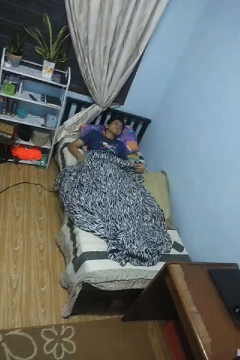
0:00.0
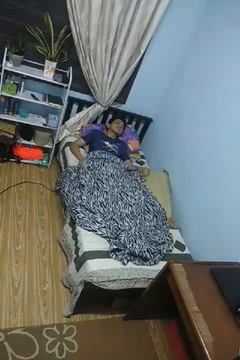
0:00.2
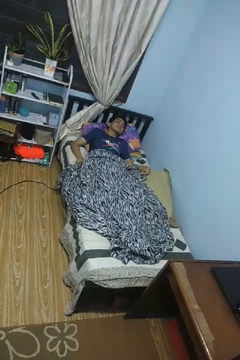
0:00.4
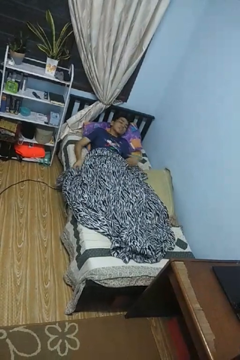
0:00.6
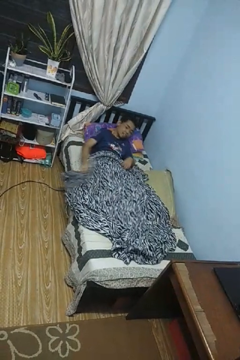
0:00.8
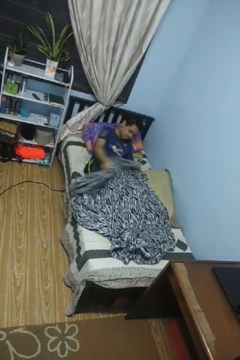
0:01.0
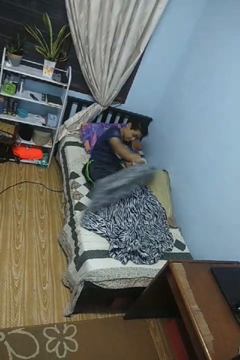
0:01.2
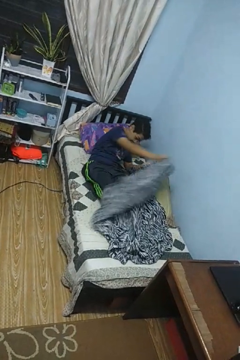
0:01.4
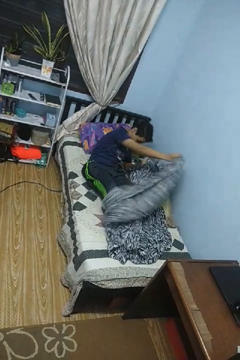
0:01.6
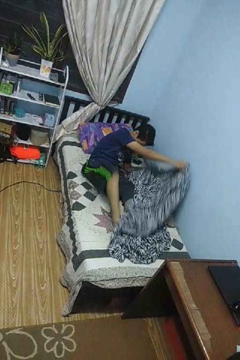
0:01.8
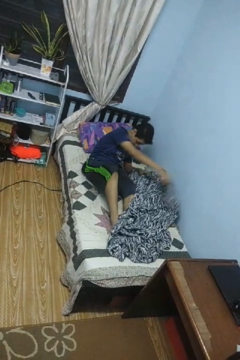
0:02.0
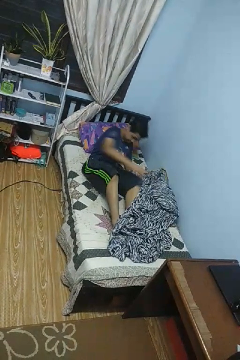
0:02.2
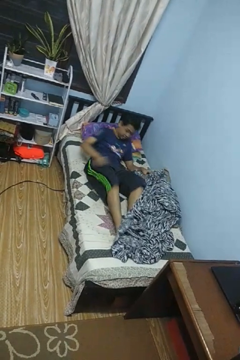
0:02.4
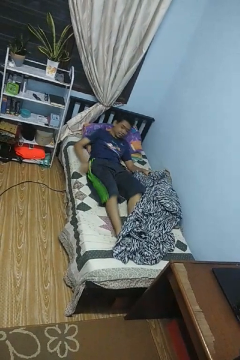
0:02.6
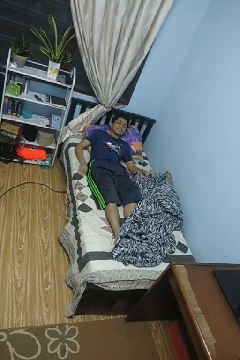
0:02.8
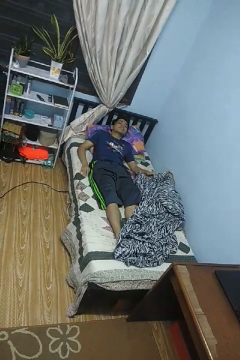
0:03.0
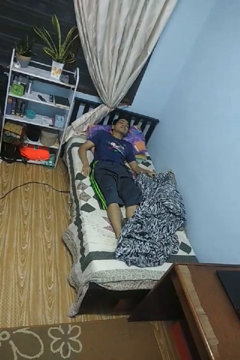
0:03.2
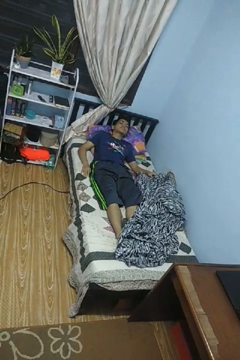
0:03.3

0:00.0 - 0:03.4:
person uncovers with blanket

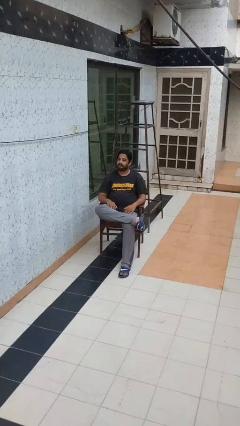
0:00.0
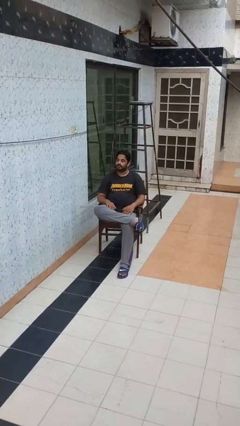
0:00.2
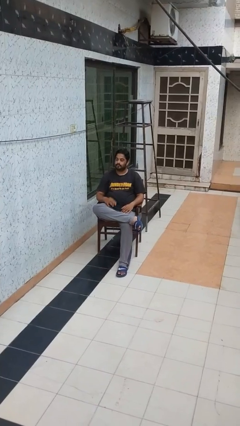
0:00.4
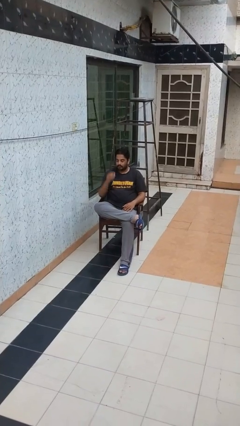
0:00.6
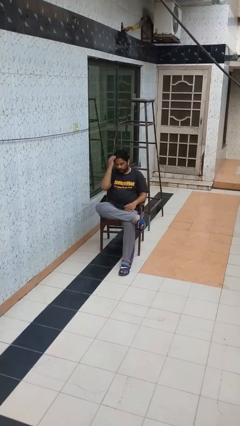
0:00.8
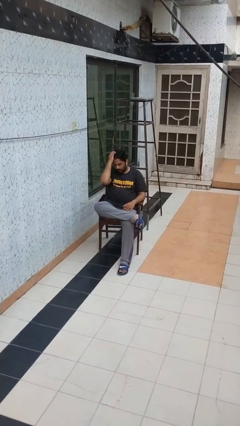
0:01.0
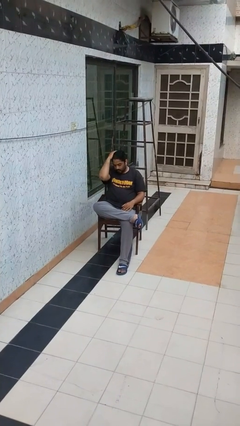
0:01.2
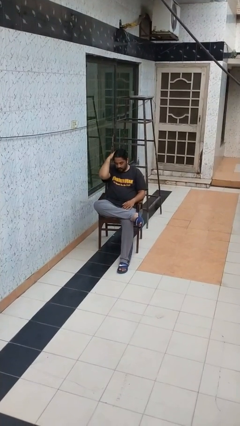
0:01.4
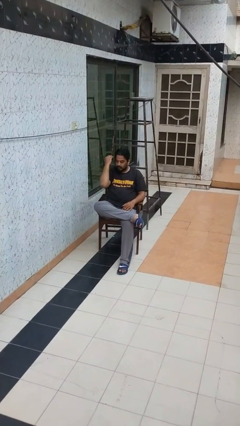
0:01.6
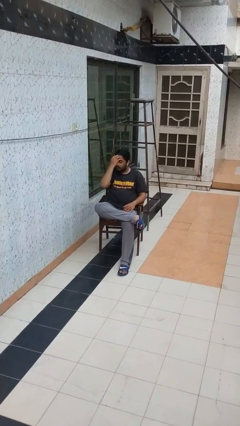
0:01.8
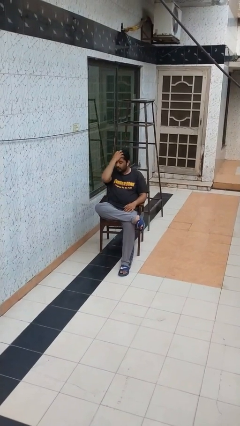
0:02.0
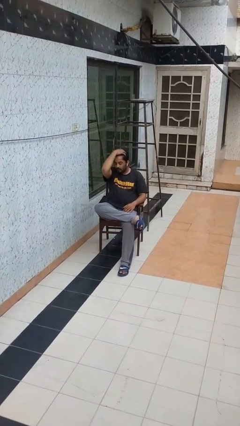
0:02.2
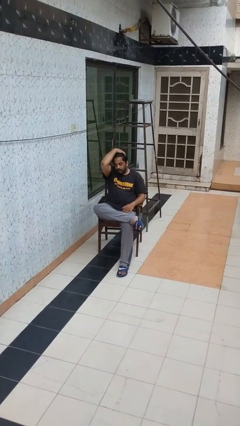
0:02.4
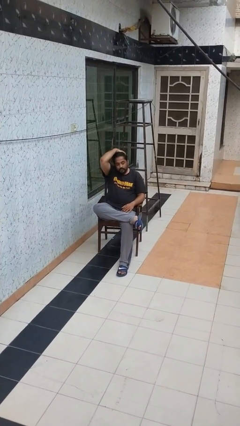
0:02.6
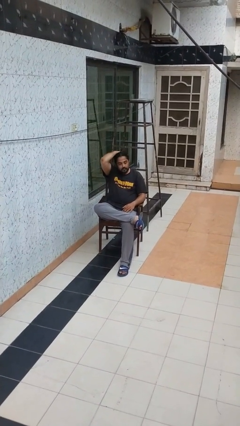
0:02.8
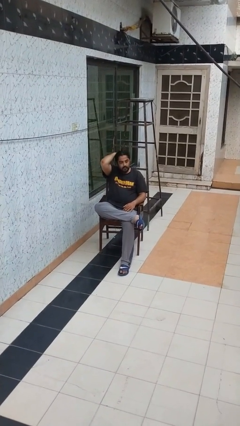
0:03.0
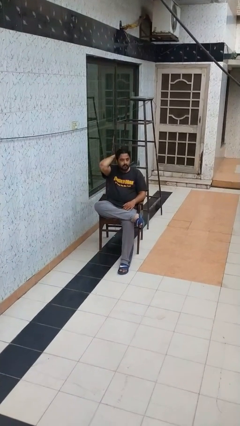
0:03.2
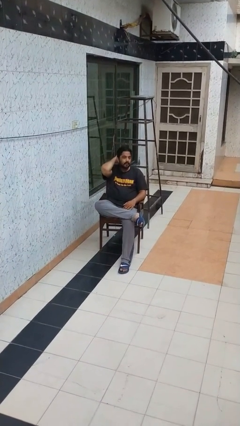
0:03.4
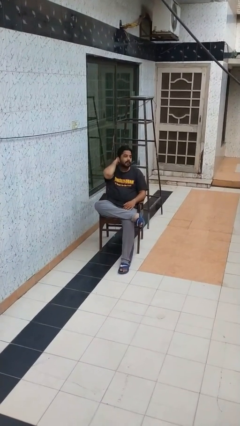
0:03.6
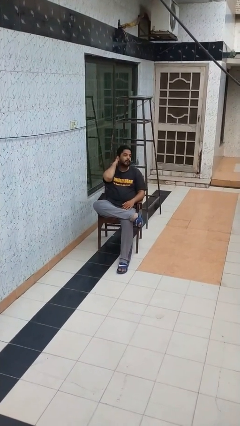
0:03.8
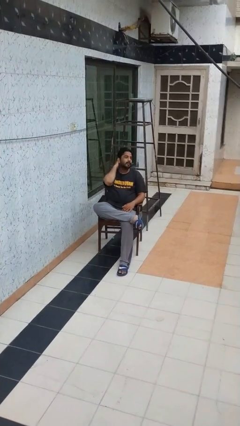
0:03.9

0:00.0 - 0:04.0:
person strokes hair

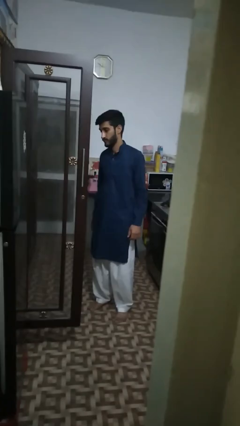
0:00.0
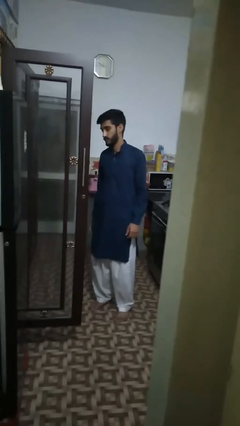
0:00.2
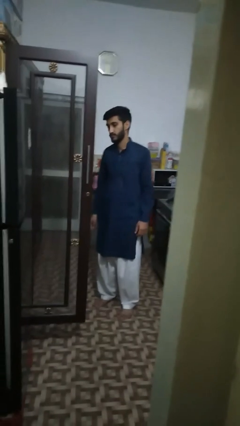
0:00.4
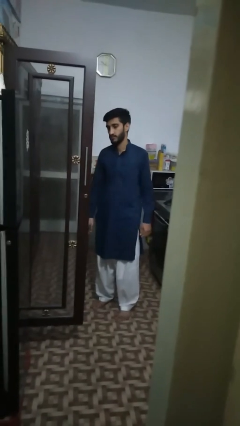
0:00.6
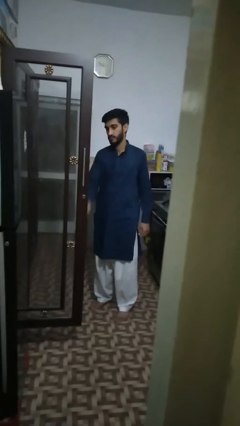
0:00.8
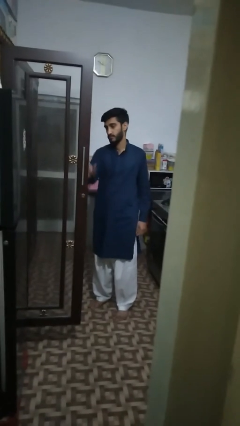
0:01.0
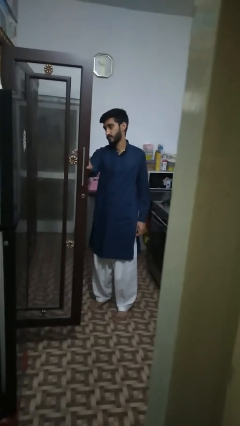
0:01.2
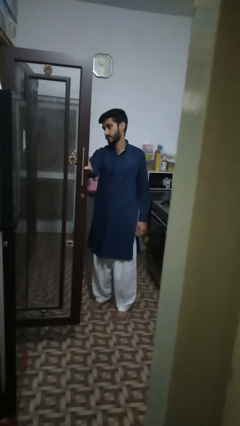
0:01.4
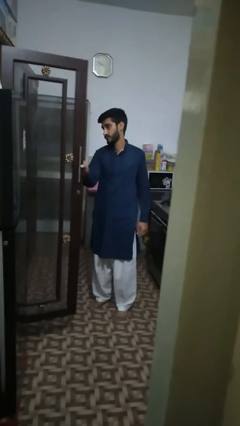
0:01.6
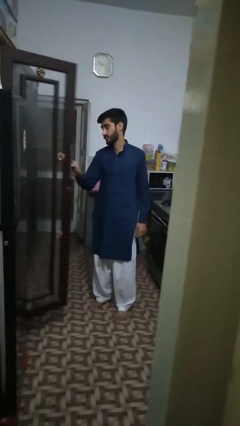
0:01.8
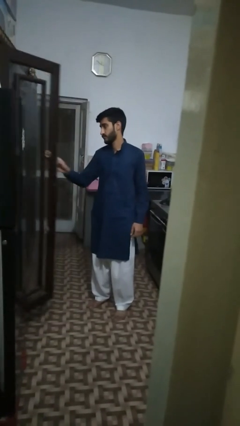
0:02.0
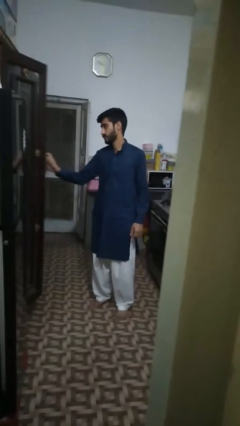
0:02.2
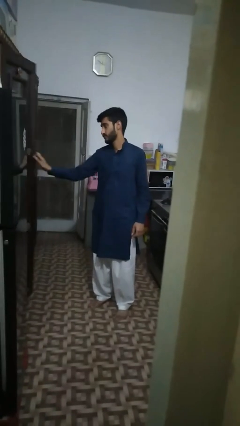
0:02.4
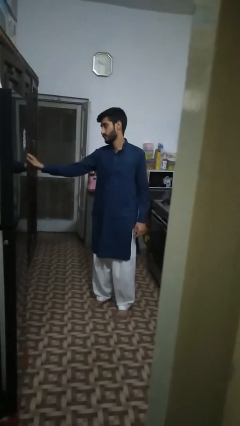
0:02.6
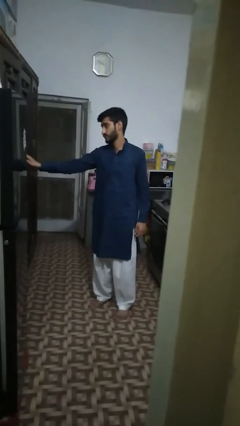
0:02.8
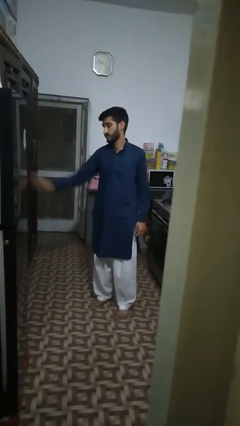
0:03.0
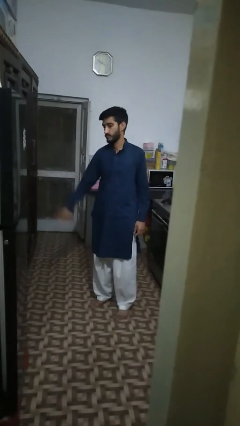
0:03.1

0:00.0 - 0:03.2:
person closes cabinet

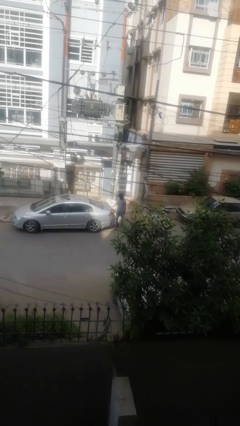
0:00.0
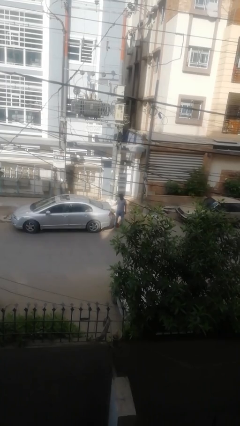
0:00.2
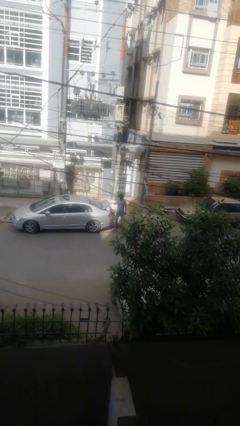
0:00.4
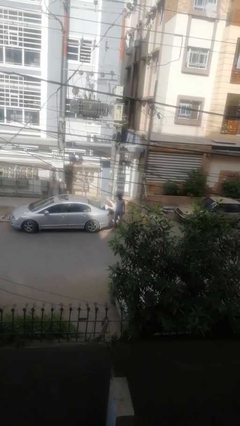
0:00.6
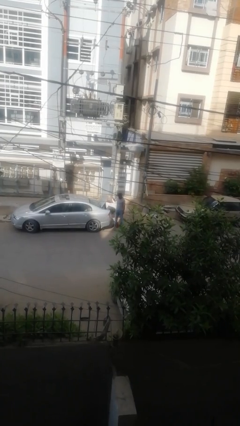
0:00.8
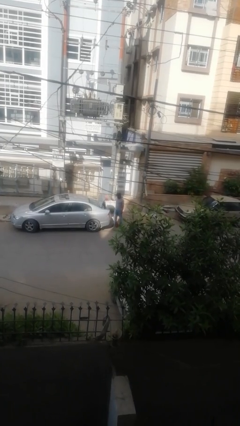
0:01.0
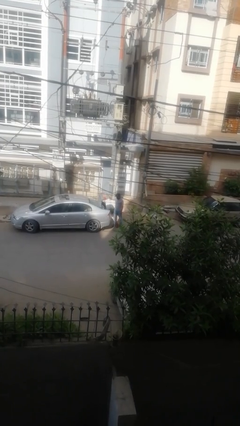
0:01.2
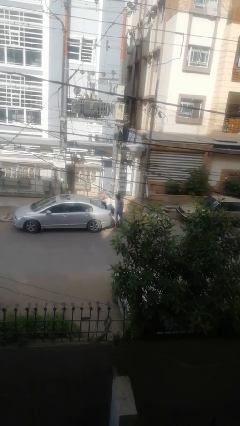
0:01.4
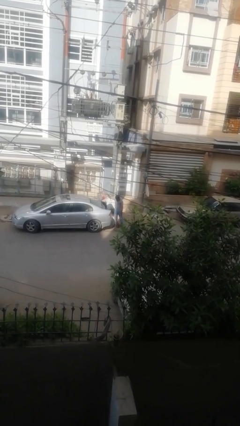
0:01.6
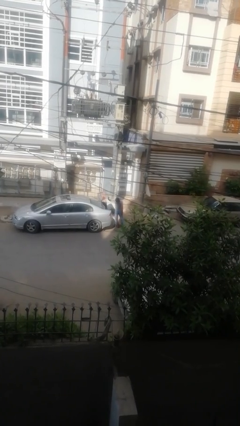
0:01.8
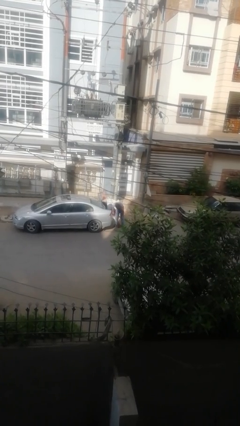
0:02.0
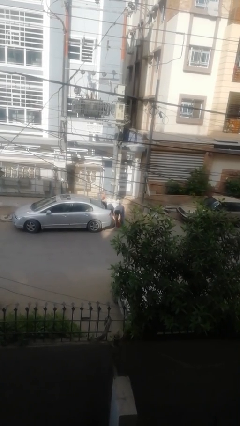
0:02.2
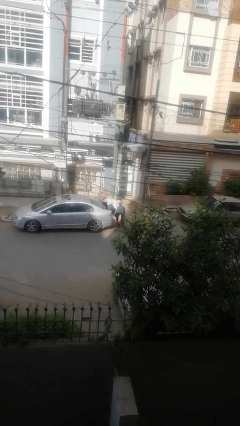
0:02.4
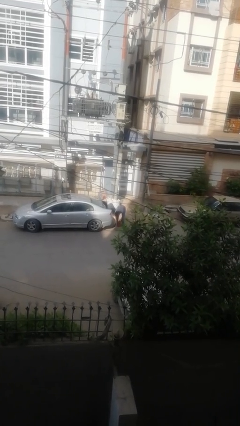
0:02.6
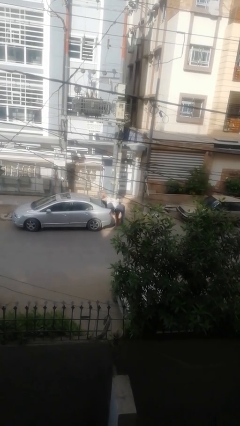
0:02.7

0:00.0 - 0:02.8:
person enters car

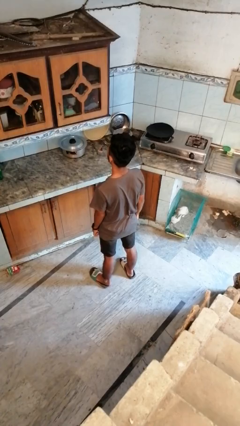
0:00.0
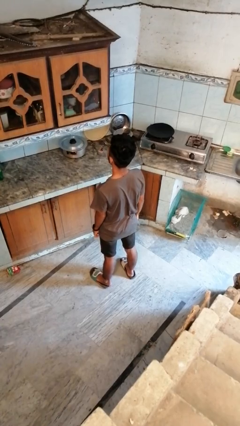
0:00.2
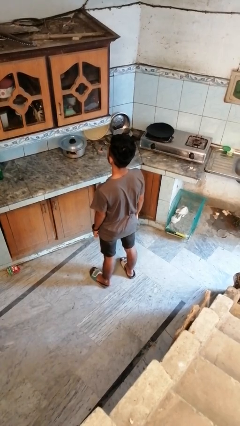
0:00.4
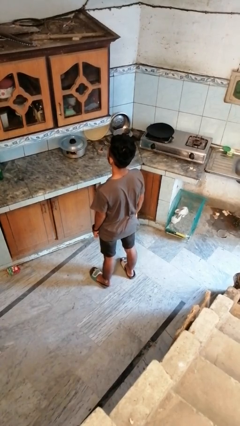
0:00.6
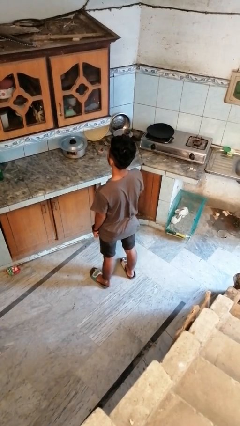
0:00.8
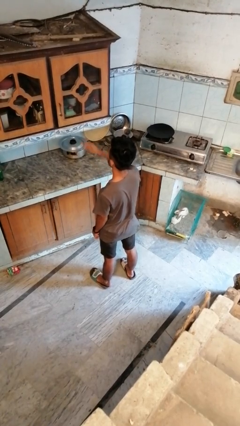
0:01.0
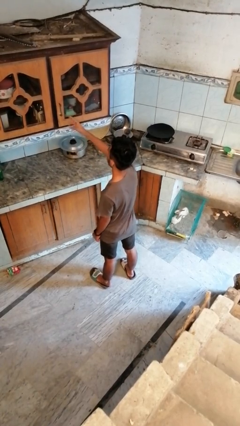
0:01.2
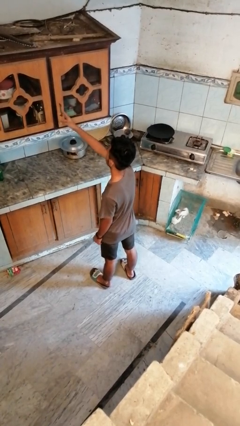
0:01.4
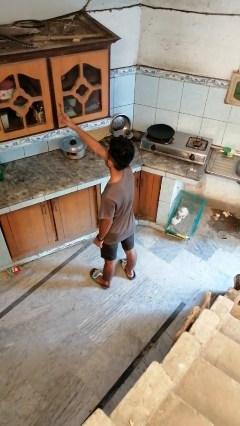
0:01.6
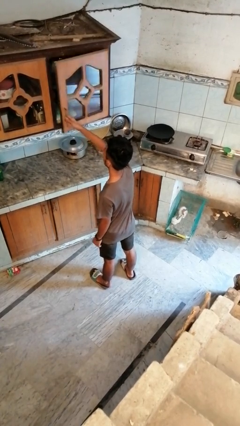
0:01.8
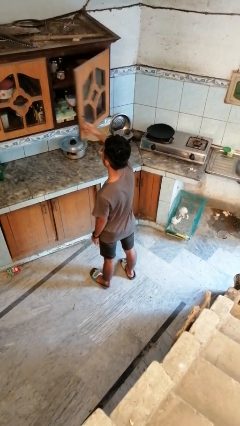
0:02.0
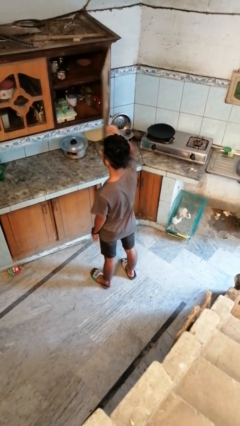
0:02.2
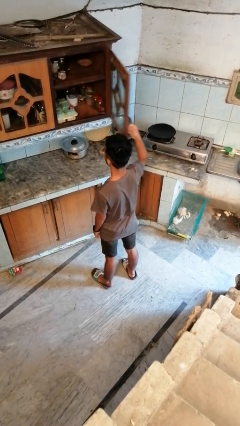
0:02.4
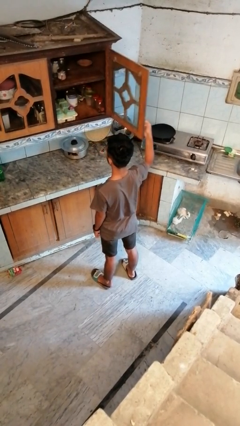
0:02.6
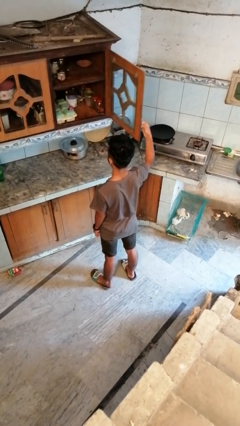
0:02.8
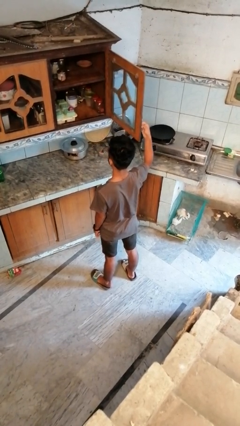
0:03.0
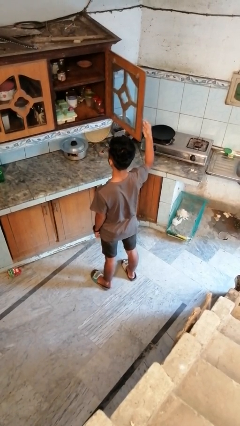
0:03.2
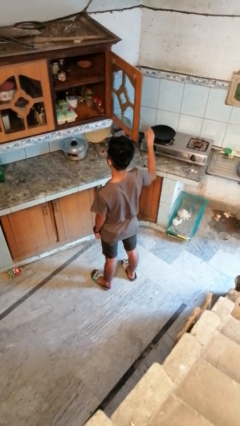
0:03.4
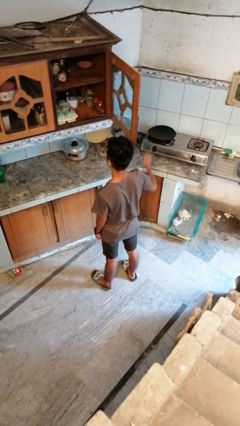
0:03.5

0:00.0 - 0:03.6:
person opens cabinet

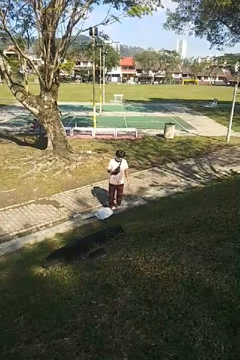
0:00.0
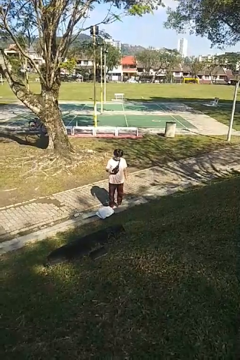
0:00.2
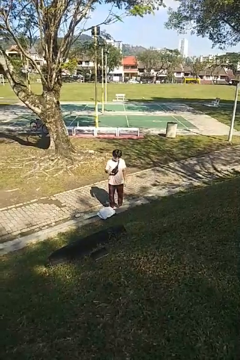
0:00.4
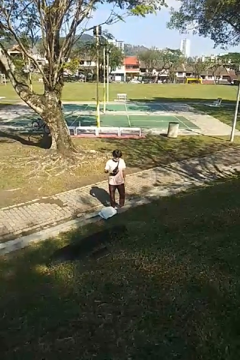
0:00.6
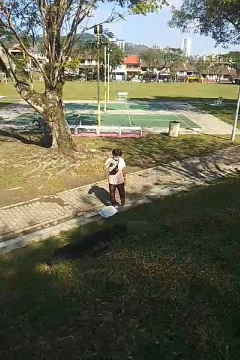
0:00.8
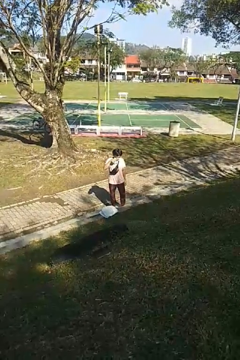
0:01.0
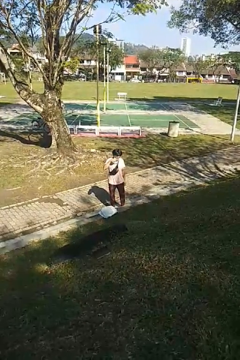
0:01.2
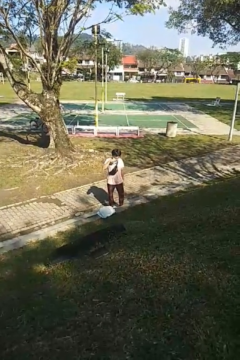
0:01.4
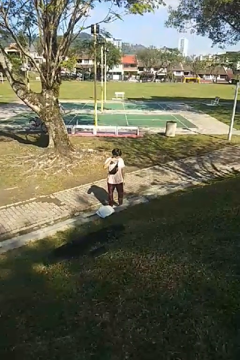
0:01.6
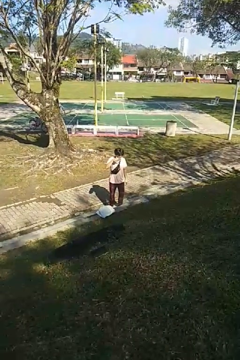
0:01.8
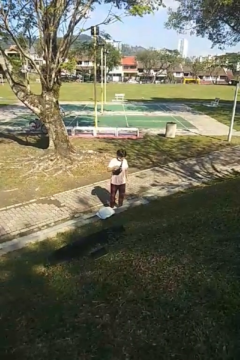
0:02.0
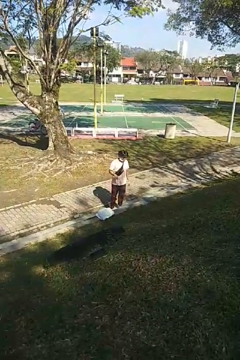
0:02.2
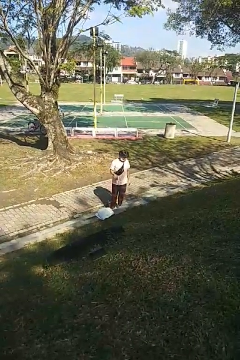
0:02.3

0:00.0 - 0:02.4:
person brushes teeth
